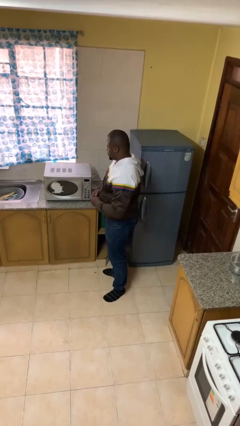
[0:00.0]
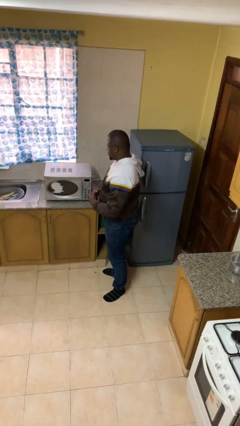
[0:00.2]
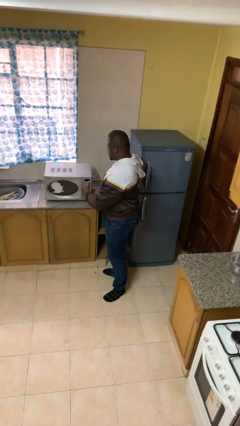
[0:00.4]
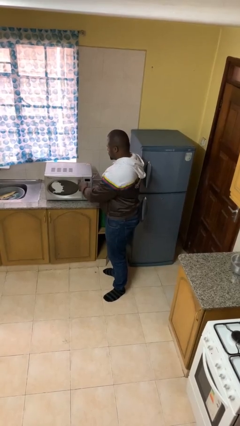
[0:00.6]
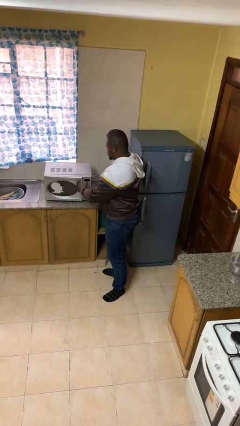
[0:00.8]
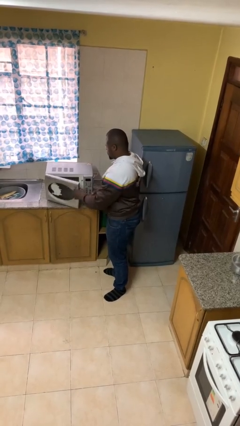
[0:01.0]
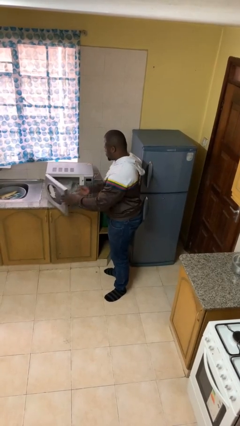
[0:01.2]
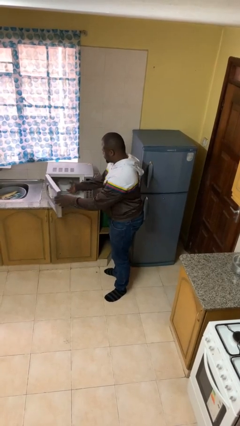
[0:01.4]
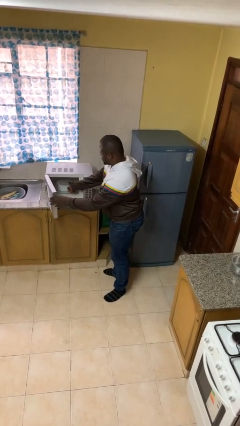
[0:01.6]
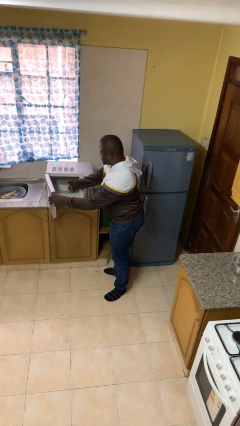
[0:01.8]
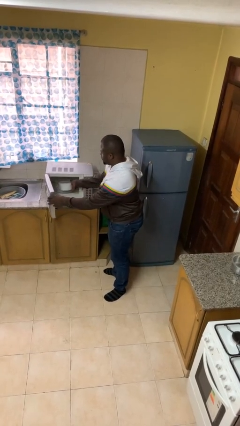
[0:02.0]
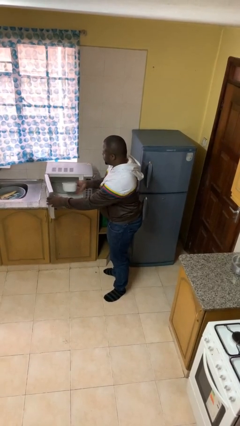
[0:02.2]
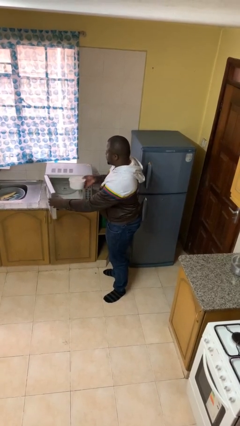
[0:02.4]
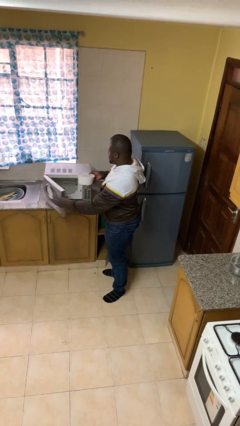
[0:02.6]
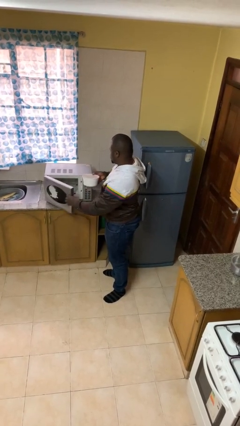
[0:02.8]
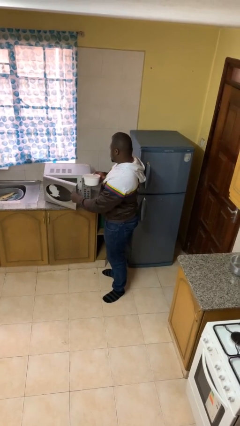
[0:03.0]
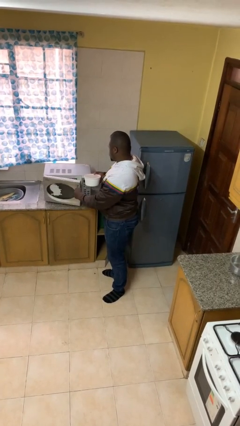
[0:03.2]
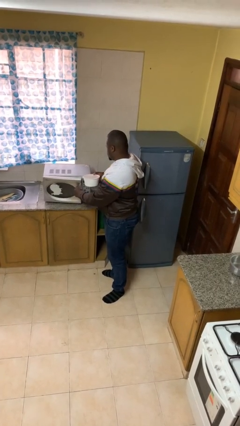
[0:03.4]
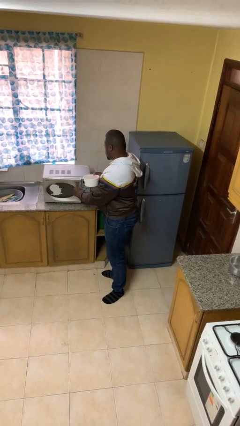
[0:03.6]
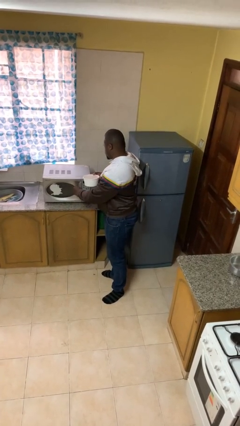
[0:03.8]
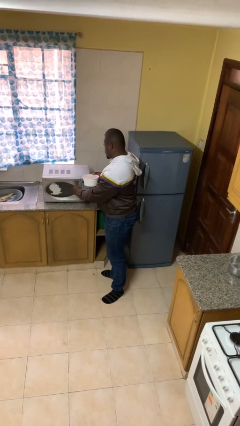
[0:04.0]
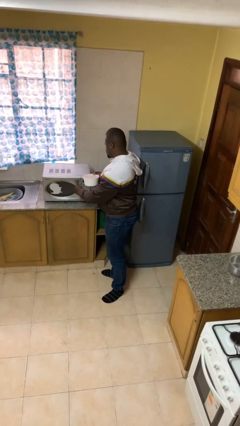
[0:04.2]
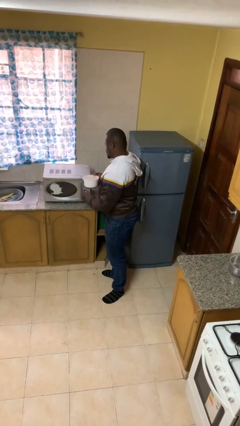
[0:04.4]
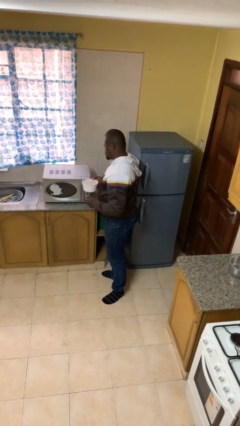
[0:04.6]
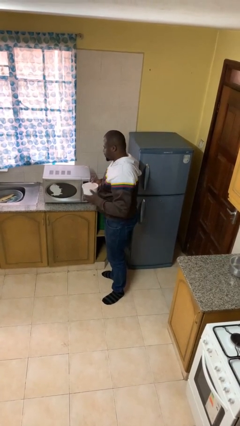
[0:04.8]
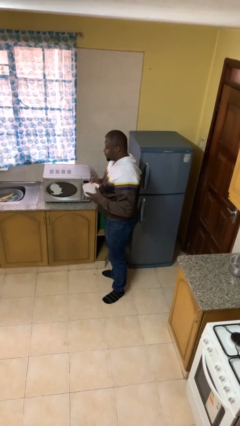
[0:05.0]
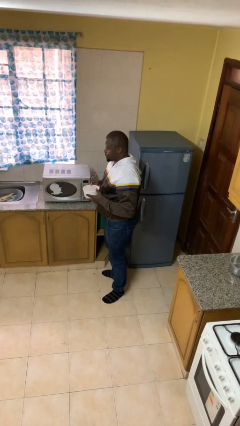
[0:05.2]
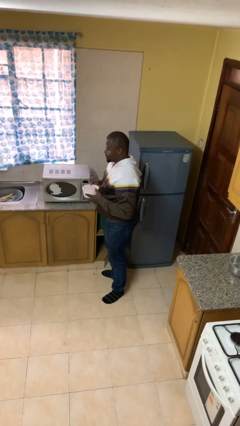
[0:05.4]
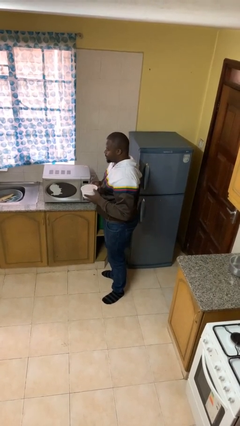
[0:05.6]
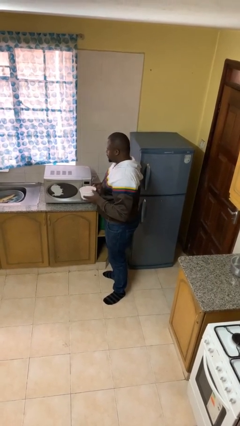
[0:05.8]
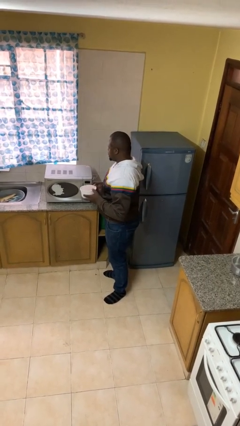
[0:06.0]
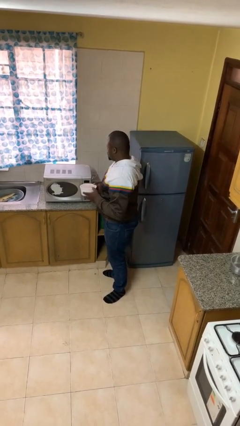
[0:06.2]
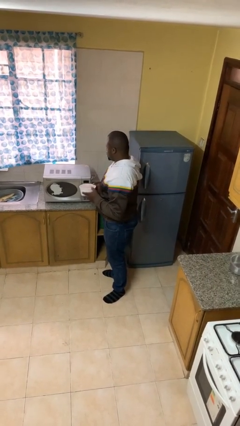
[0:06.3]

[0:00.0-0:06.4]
person takes object from microwave

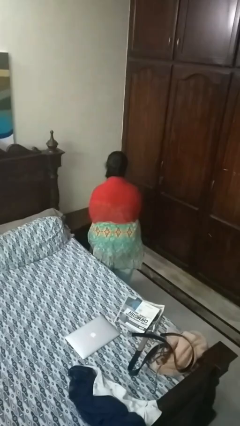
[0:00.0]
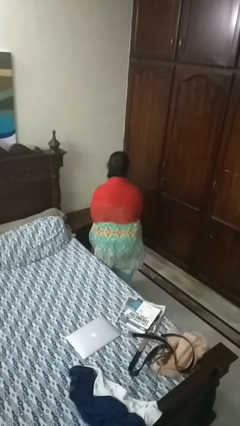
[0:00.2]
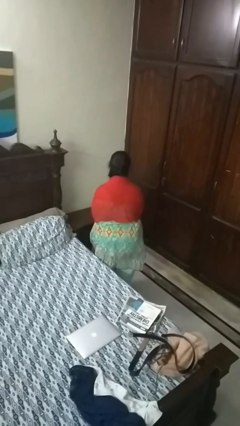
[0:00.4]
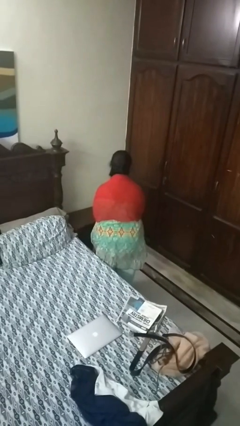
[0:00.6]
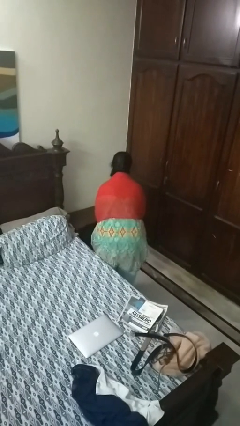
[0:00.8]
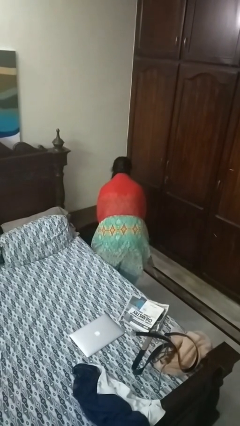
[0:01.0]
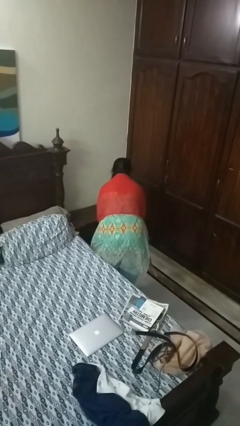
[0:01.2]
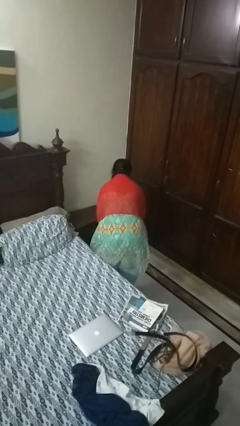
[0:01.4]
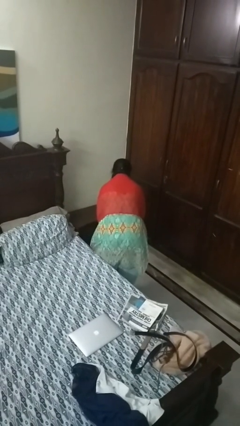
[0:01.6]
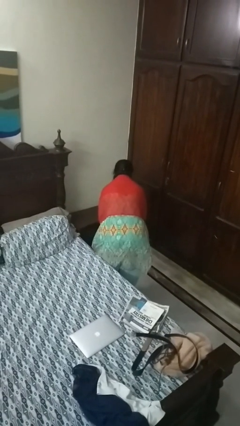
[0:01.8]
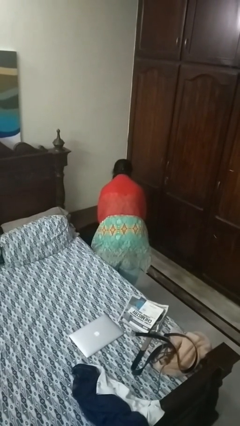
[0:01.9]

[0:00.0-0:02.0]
person bows

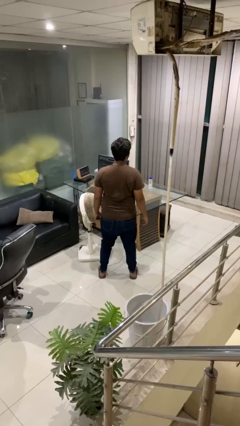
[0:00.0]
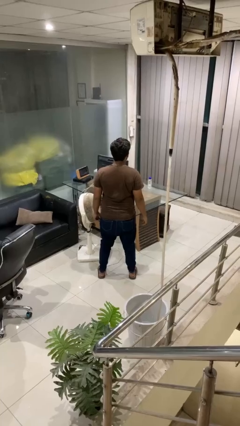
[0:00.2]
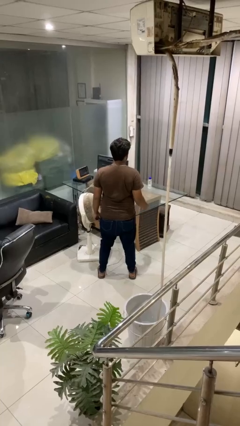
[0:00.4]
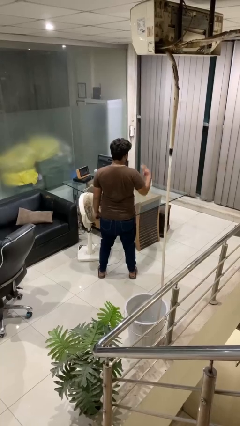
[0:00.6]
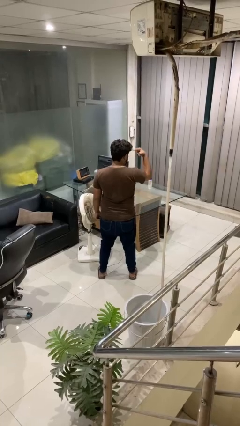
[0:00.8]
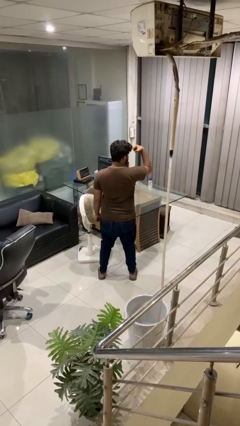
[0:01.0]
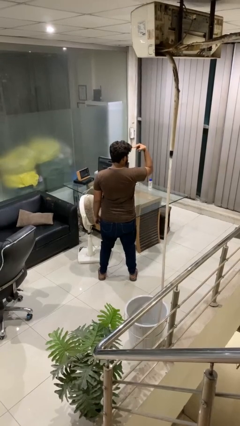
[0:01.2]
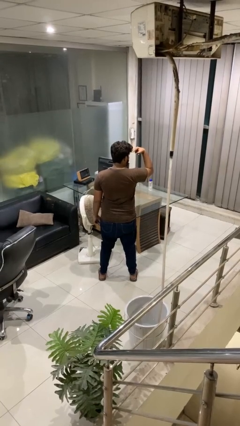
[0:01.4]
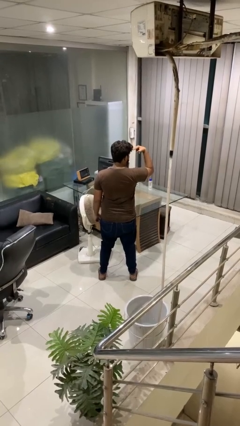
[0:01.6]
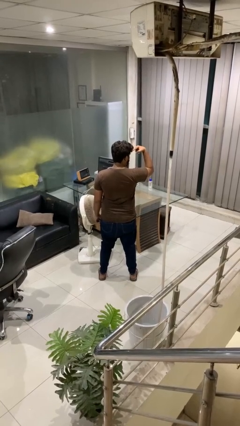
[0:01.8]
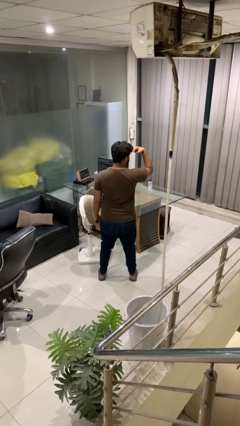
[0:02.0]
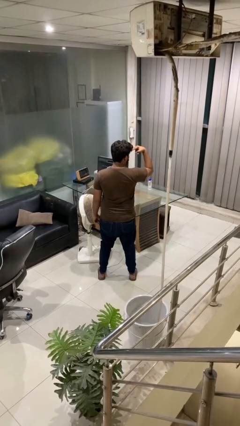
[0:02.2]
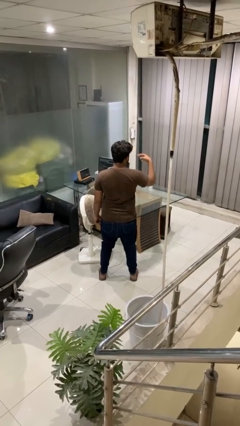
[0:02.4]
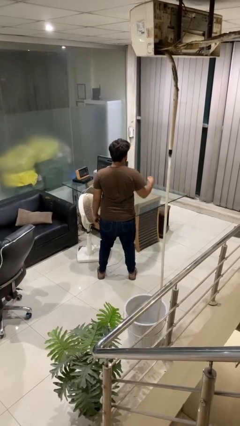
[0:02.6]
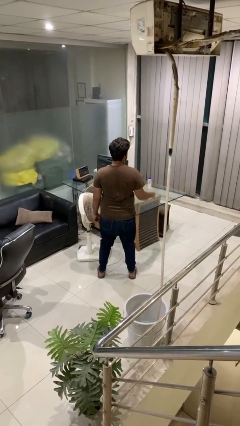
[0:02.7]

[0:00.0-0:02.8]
person gestures watch closely

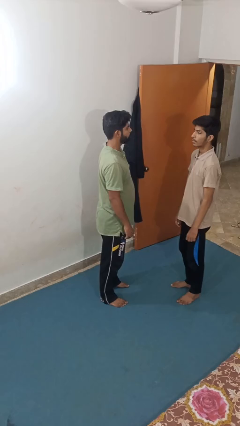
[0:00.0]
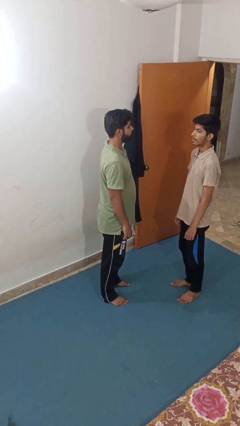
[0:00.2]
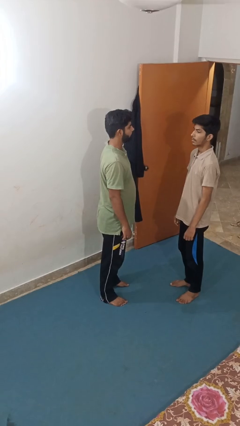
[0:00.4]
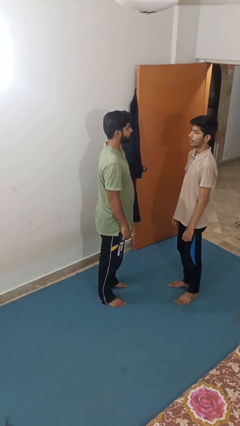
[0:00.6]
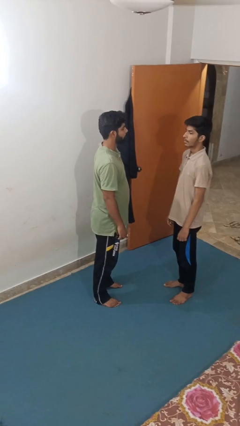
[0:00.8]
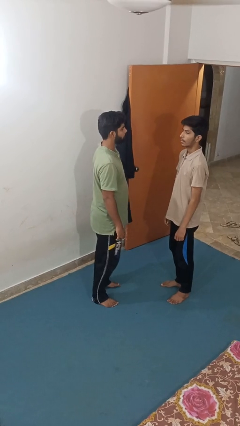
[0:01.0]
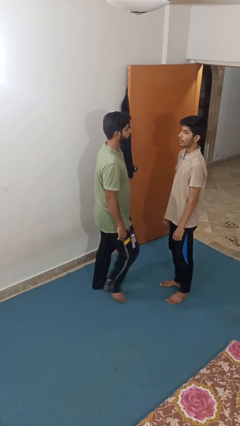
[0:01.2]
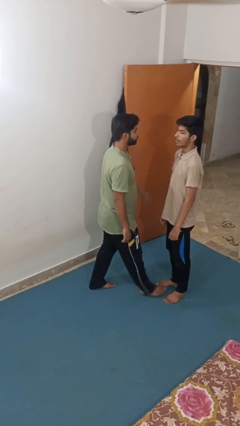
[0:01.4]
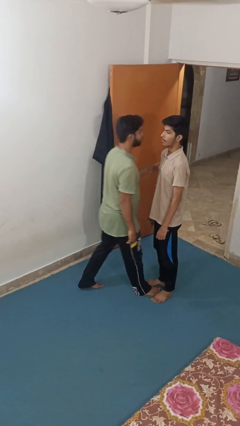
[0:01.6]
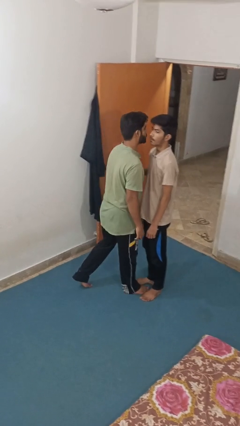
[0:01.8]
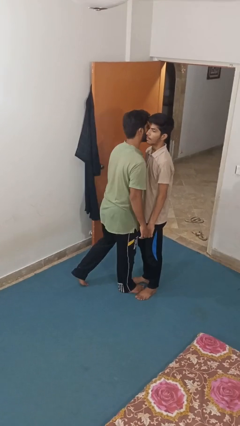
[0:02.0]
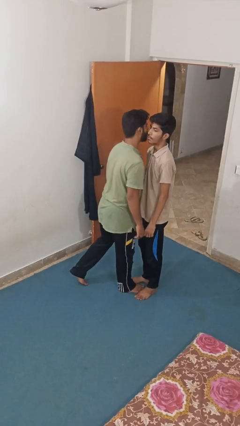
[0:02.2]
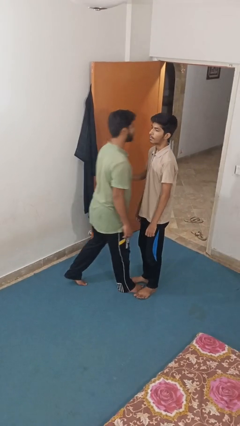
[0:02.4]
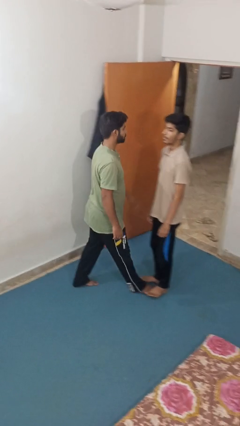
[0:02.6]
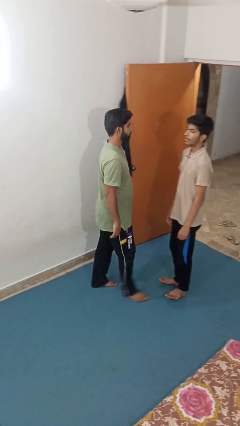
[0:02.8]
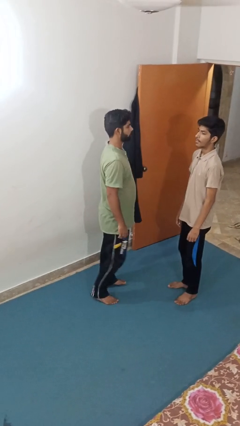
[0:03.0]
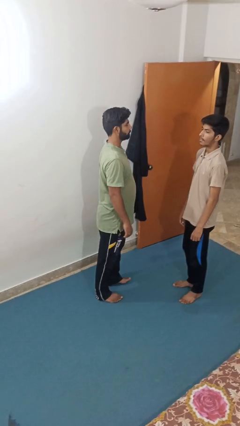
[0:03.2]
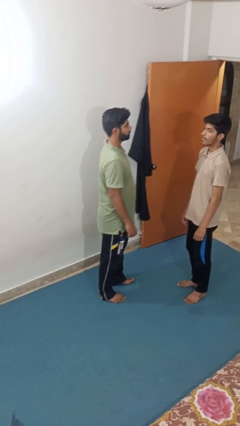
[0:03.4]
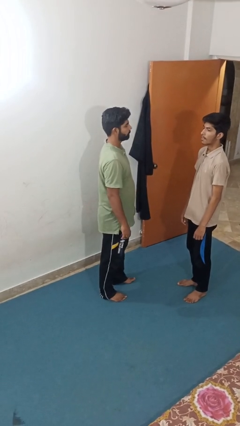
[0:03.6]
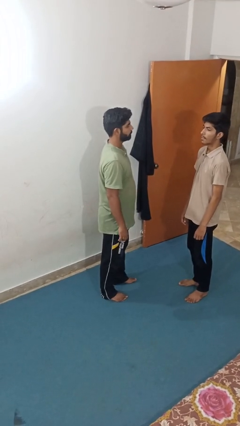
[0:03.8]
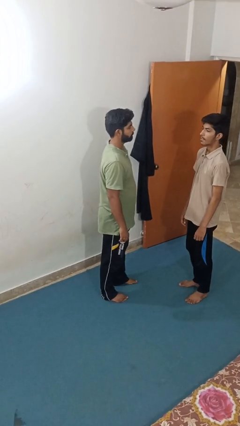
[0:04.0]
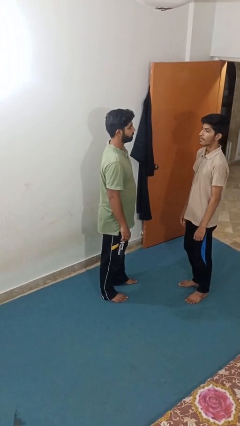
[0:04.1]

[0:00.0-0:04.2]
person kisses cheek of person

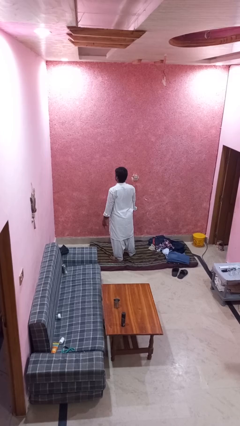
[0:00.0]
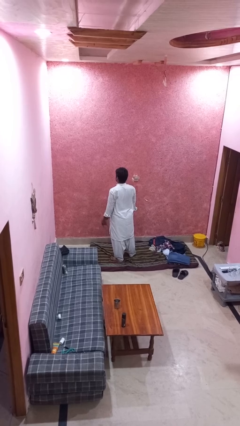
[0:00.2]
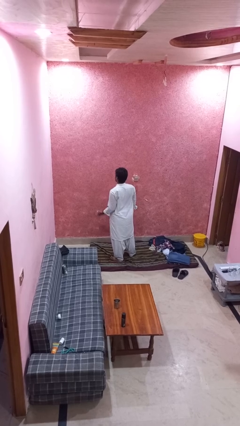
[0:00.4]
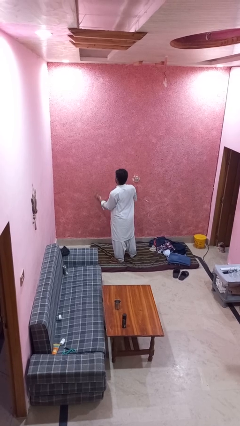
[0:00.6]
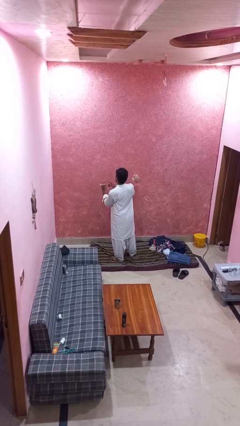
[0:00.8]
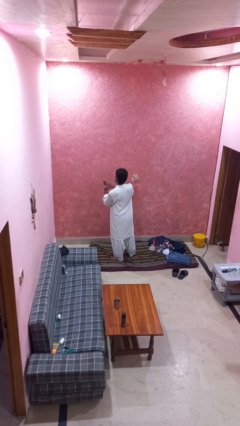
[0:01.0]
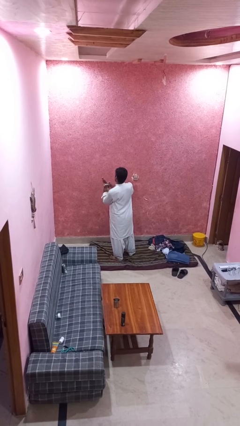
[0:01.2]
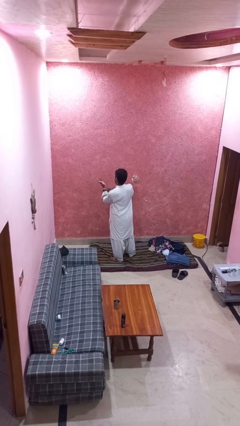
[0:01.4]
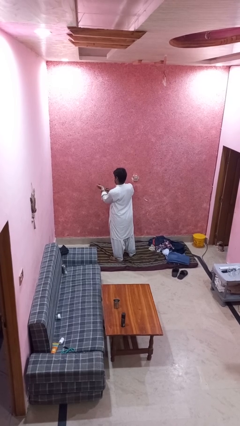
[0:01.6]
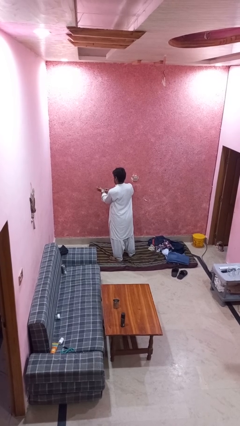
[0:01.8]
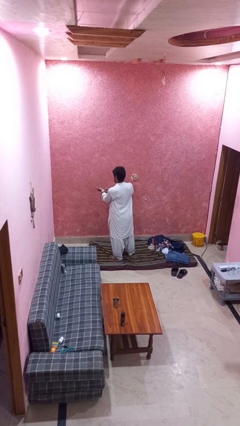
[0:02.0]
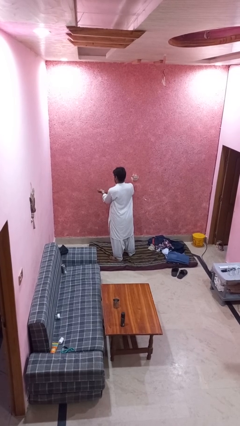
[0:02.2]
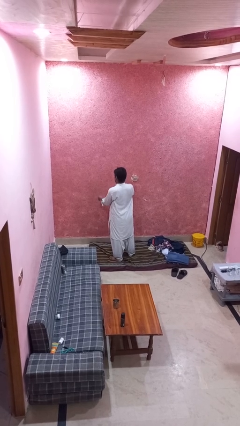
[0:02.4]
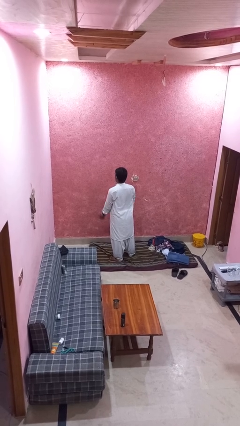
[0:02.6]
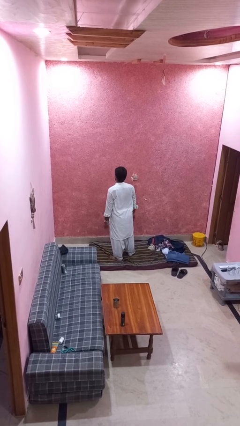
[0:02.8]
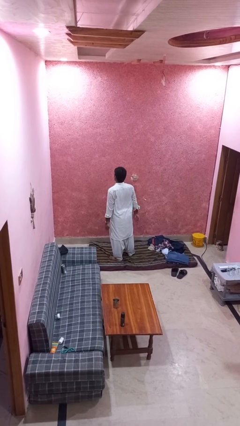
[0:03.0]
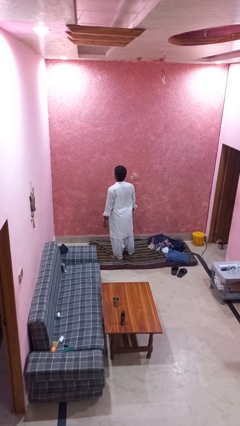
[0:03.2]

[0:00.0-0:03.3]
person puts on wristwatch
